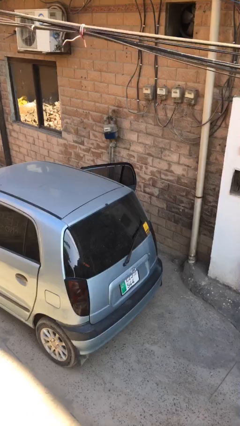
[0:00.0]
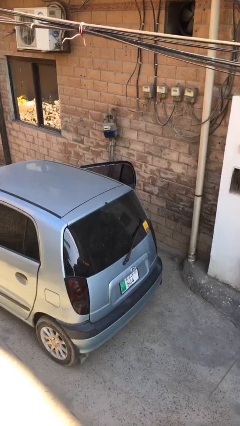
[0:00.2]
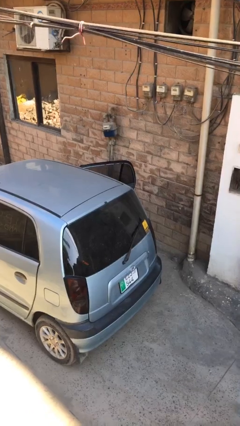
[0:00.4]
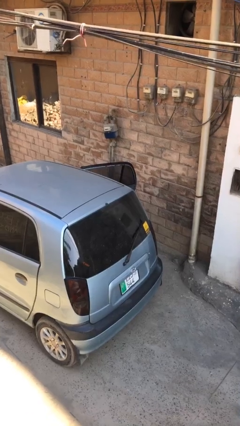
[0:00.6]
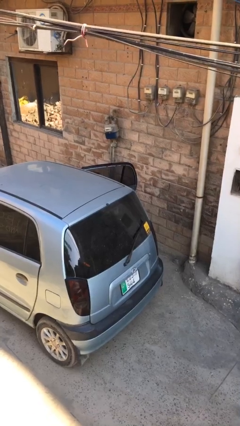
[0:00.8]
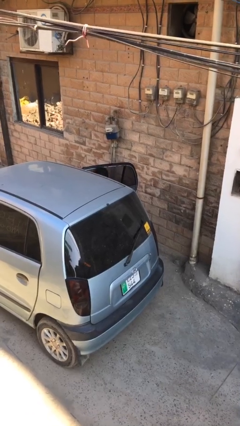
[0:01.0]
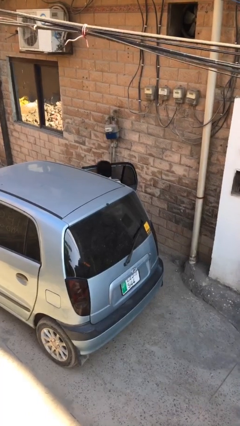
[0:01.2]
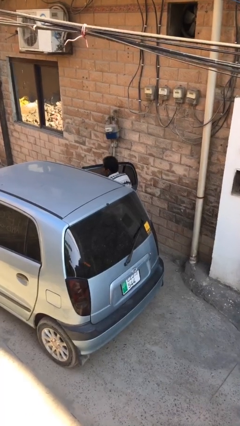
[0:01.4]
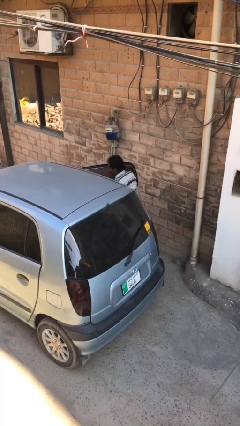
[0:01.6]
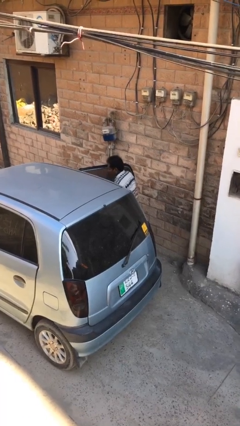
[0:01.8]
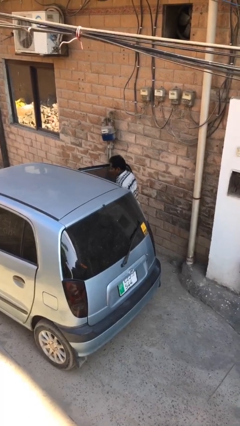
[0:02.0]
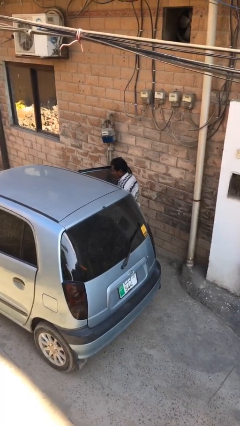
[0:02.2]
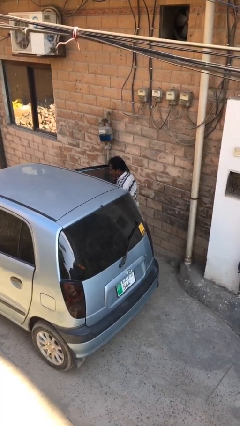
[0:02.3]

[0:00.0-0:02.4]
person exits car

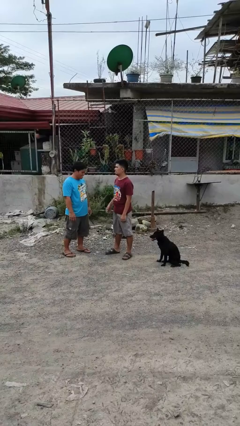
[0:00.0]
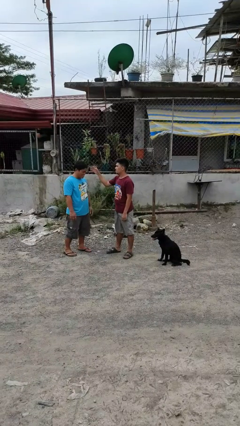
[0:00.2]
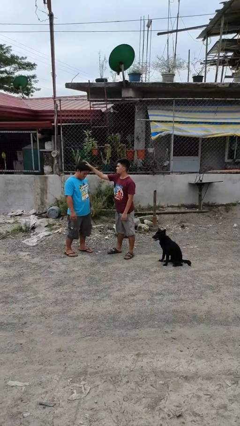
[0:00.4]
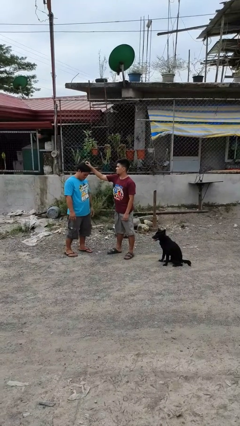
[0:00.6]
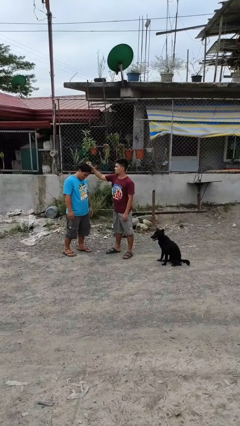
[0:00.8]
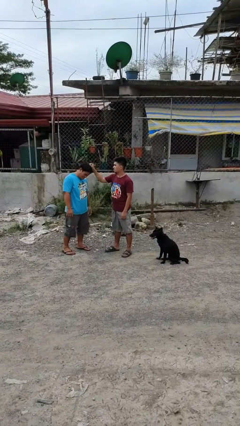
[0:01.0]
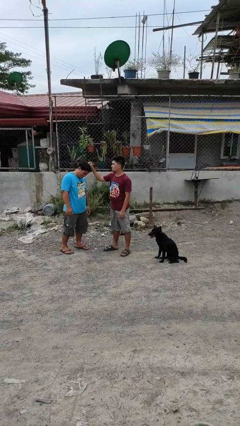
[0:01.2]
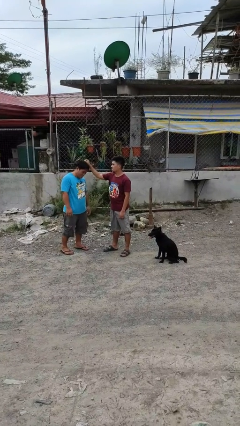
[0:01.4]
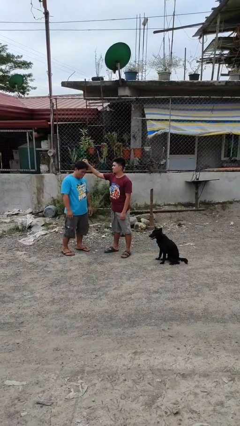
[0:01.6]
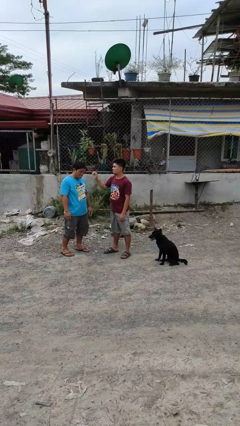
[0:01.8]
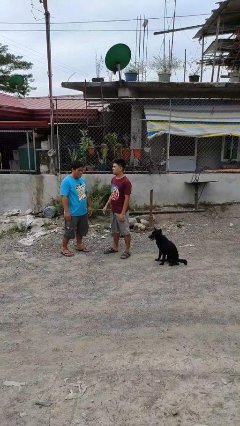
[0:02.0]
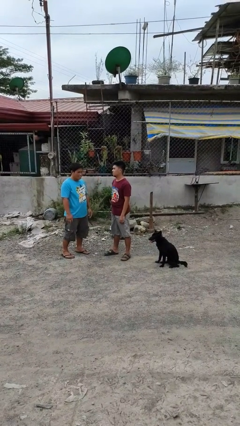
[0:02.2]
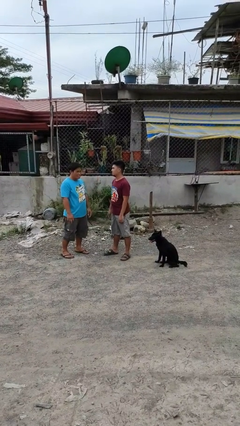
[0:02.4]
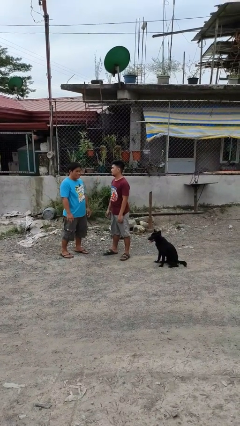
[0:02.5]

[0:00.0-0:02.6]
person grabs person by hair

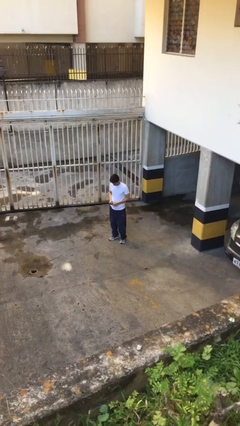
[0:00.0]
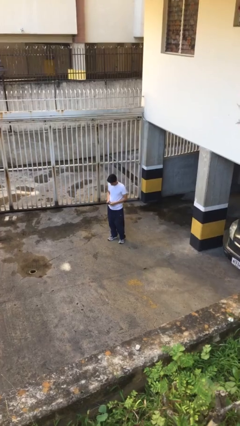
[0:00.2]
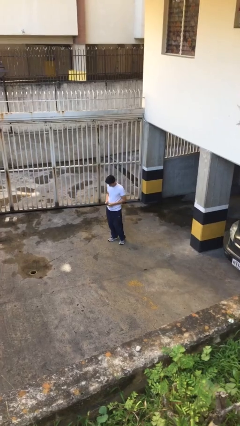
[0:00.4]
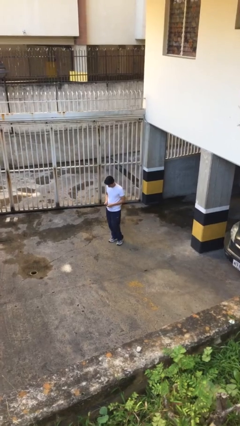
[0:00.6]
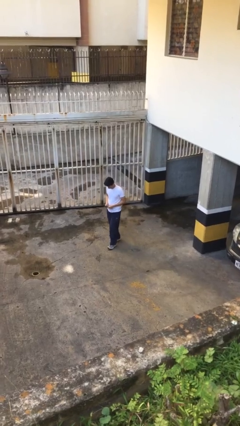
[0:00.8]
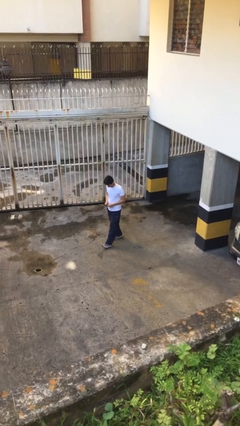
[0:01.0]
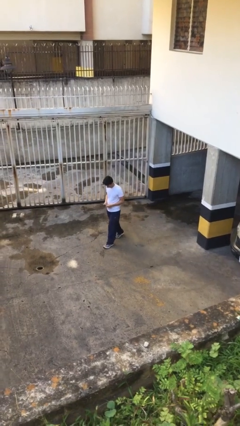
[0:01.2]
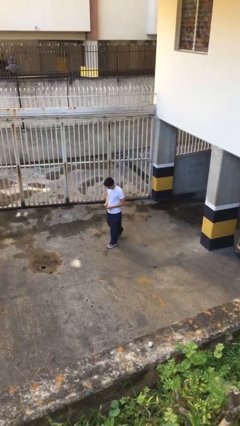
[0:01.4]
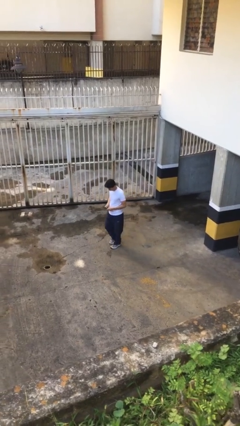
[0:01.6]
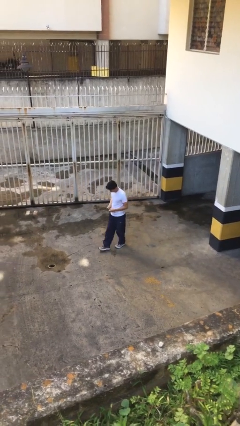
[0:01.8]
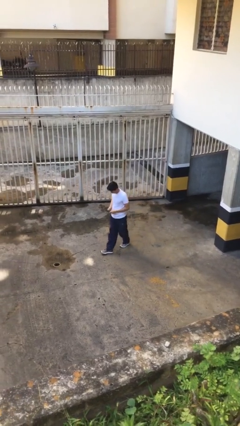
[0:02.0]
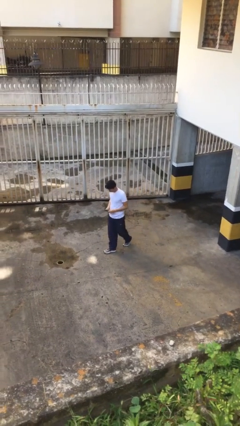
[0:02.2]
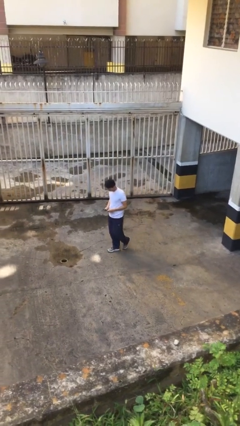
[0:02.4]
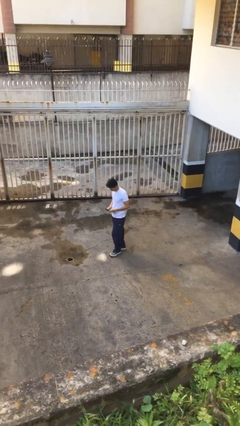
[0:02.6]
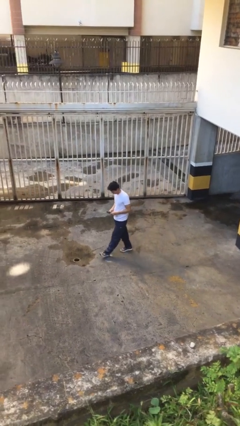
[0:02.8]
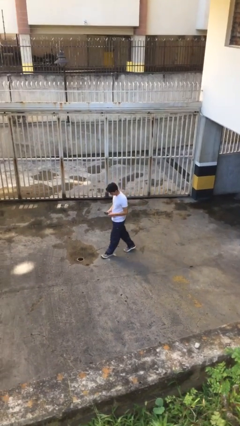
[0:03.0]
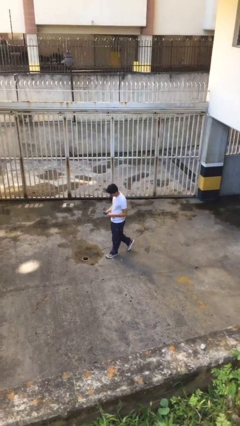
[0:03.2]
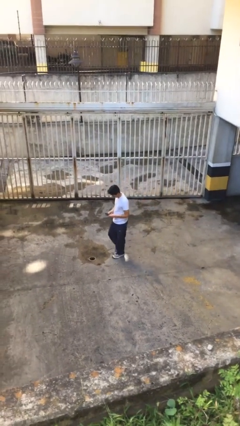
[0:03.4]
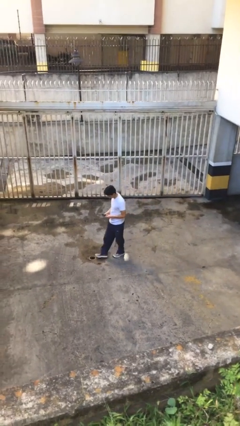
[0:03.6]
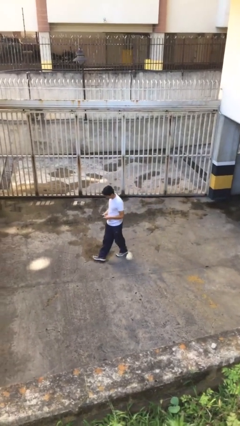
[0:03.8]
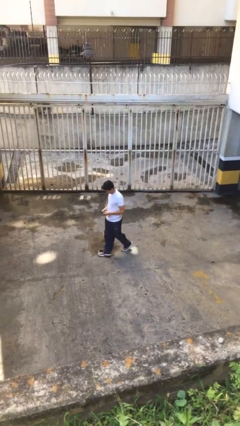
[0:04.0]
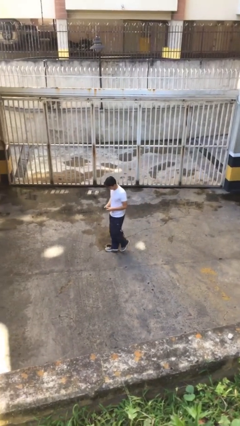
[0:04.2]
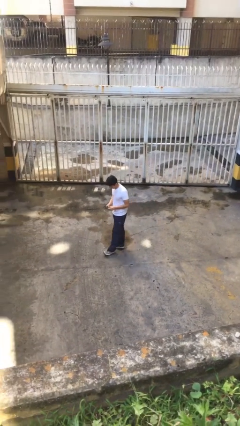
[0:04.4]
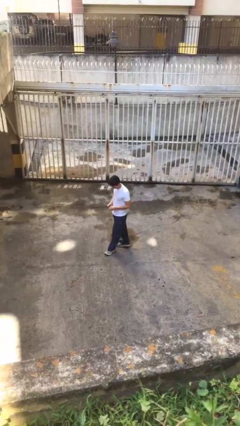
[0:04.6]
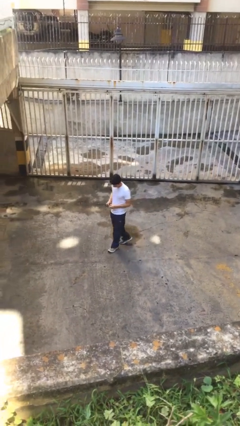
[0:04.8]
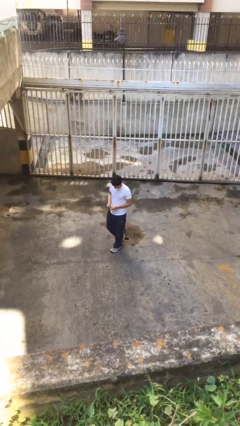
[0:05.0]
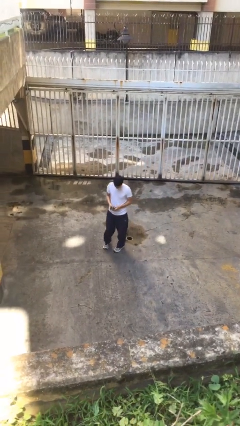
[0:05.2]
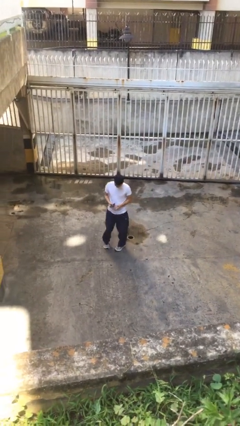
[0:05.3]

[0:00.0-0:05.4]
person texts on phone

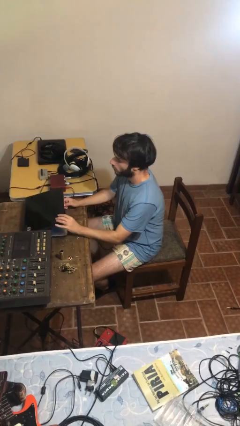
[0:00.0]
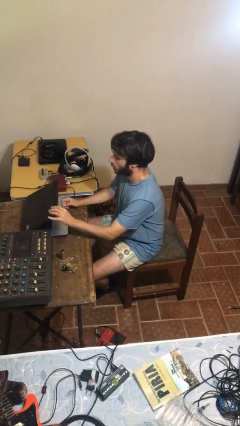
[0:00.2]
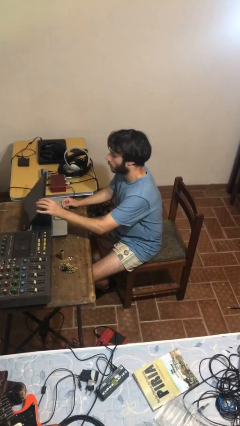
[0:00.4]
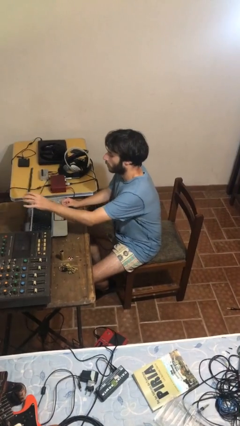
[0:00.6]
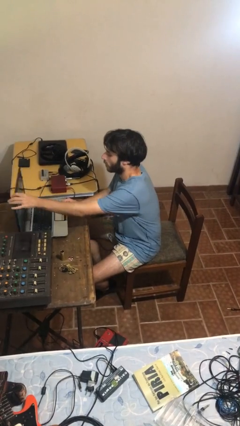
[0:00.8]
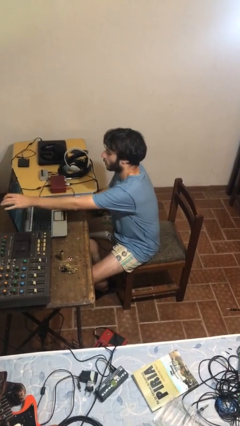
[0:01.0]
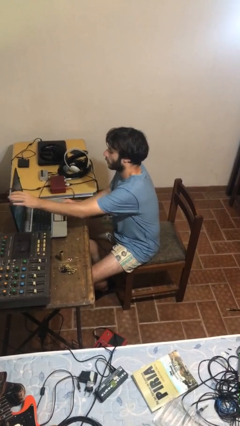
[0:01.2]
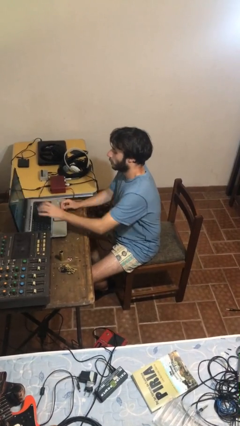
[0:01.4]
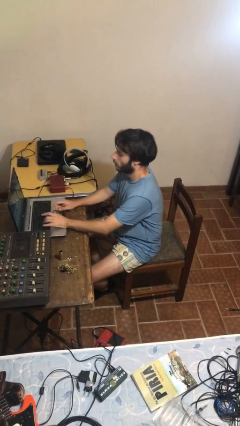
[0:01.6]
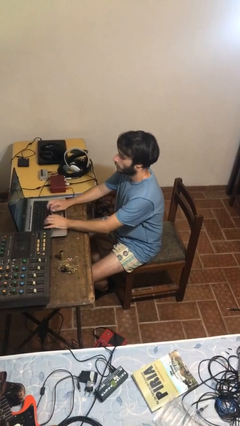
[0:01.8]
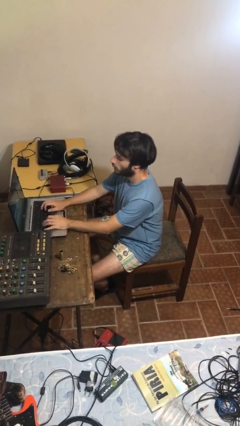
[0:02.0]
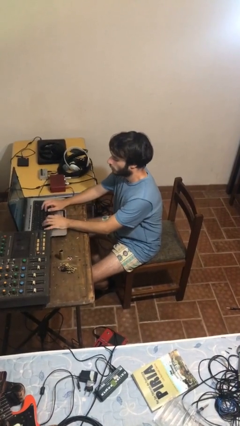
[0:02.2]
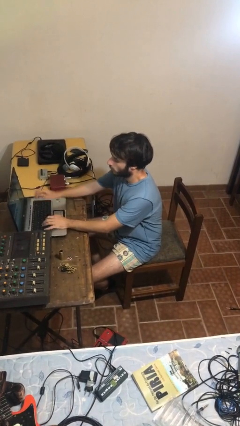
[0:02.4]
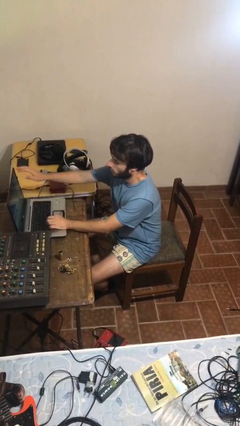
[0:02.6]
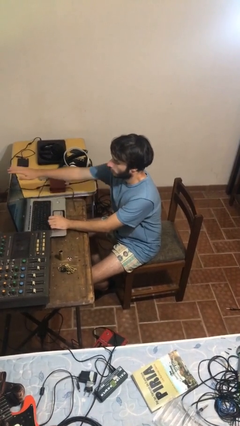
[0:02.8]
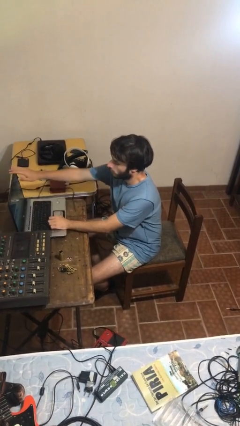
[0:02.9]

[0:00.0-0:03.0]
person interacts with laptop

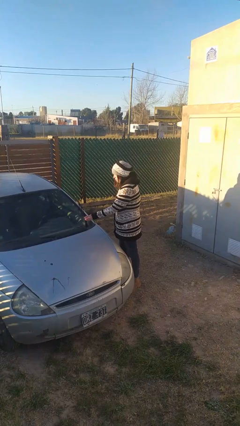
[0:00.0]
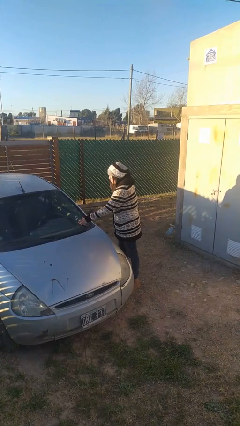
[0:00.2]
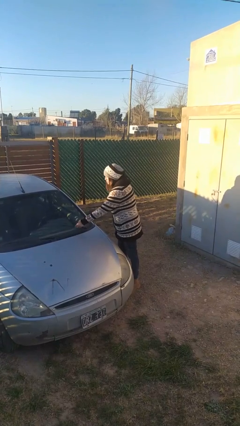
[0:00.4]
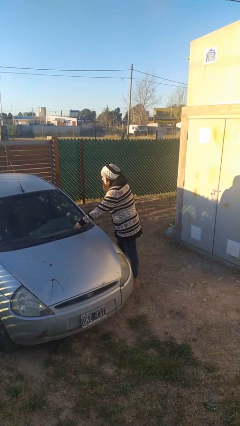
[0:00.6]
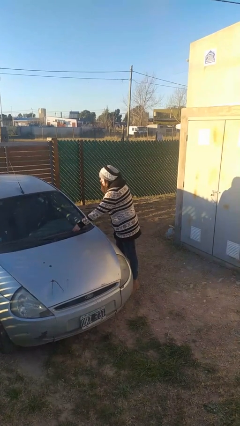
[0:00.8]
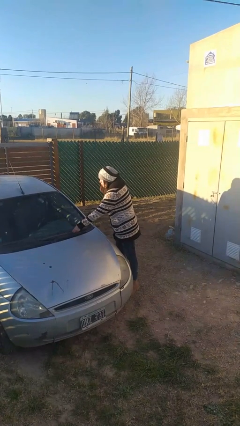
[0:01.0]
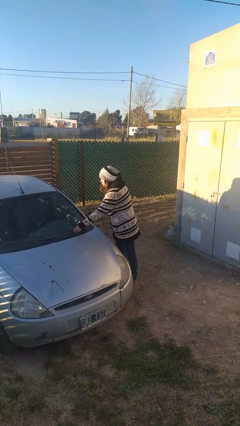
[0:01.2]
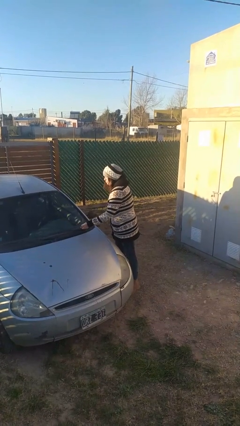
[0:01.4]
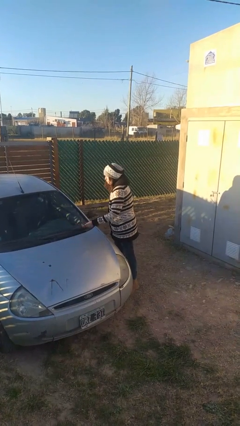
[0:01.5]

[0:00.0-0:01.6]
person flips down car wipers

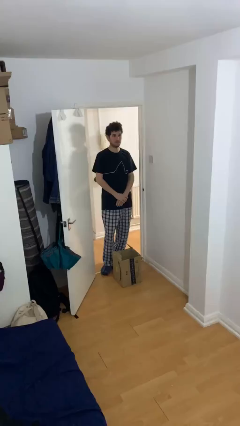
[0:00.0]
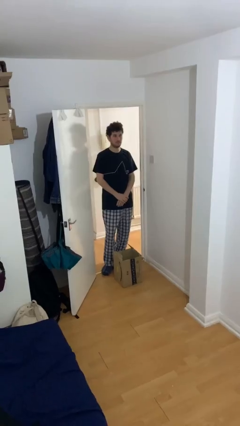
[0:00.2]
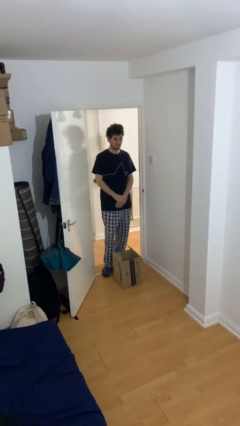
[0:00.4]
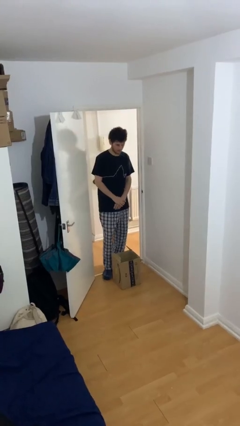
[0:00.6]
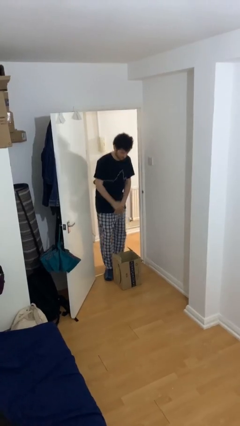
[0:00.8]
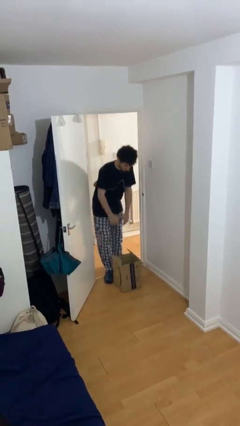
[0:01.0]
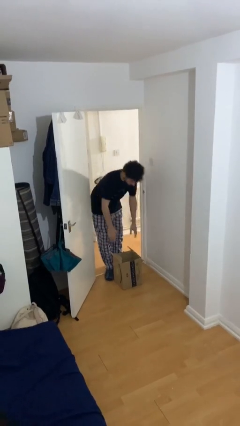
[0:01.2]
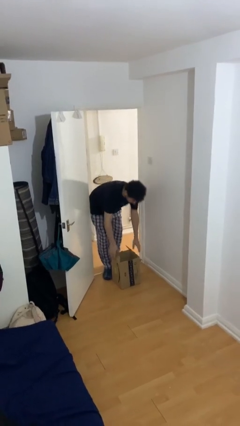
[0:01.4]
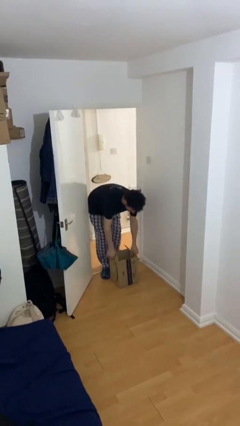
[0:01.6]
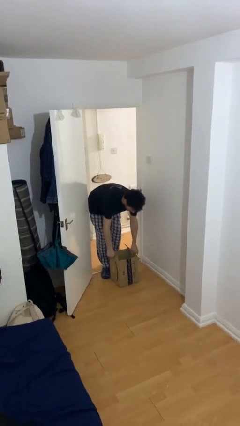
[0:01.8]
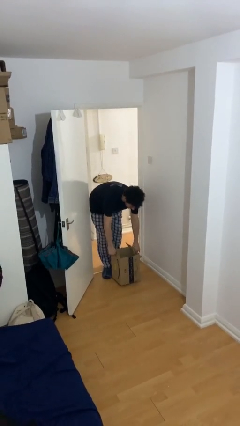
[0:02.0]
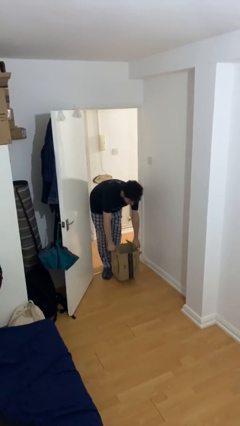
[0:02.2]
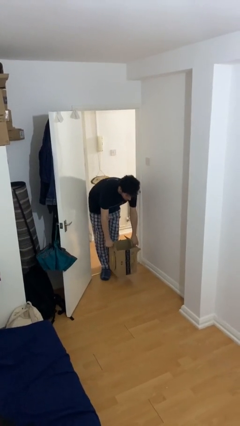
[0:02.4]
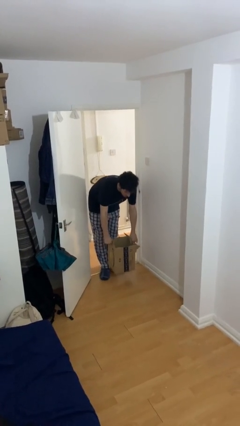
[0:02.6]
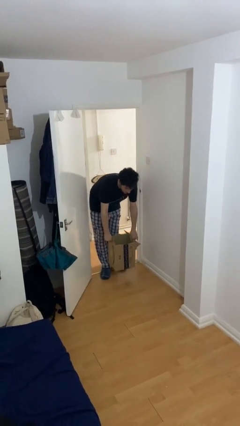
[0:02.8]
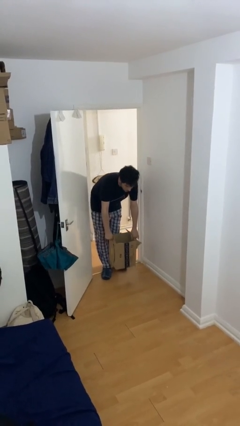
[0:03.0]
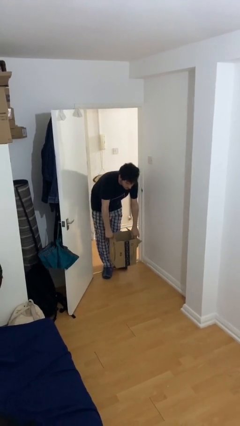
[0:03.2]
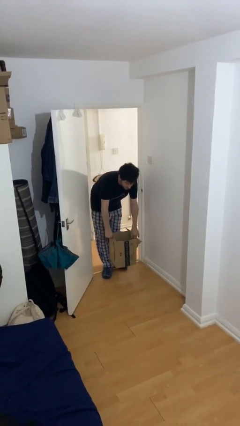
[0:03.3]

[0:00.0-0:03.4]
person picks up object from floor
